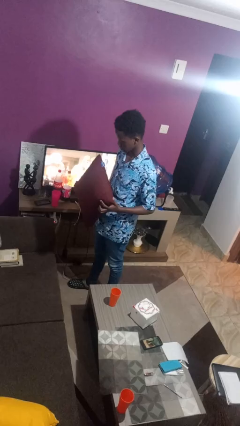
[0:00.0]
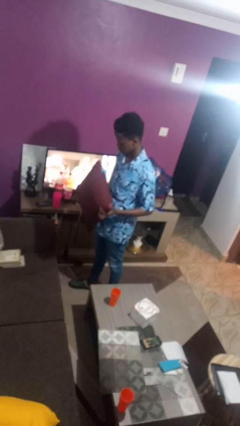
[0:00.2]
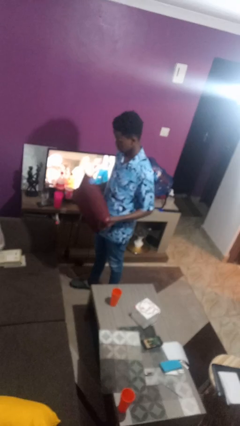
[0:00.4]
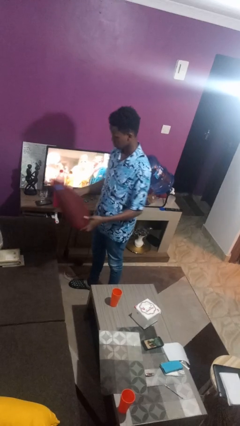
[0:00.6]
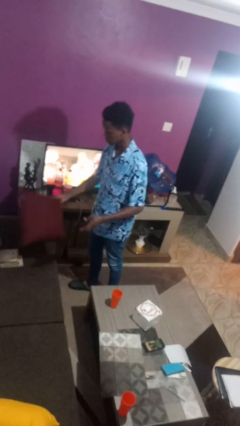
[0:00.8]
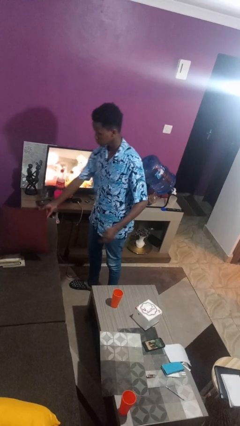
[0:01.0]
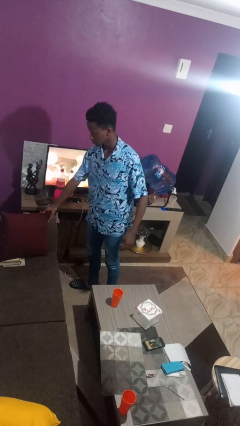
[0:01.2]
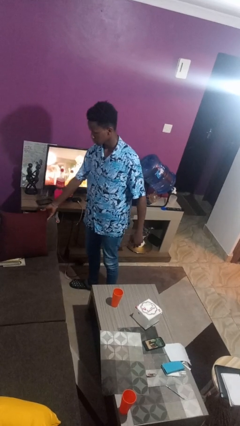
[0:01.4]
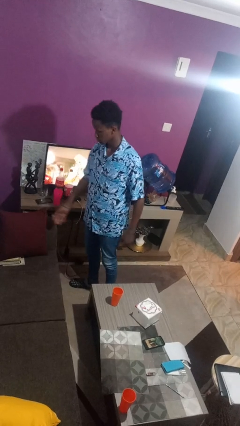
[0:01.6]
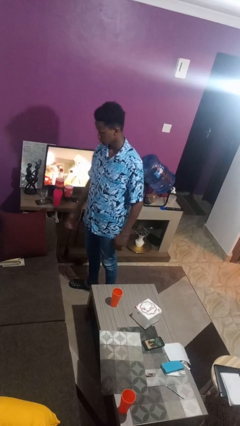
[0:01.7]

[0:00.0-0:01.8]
person puts down object on couch

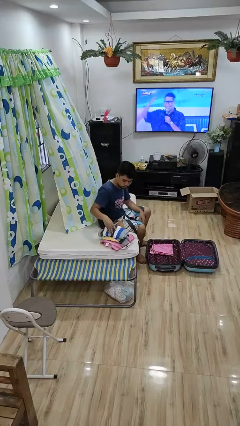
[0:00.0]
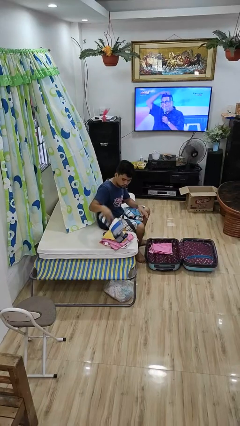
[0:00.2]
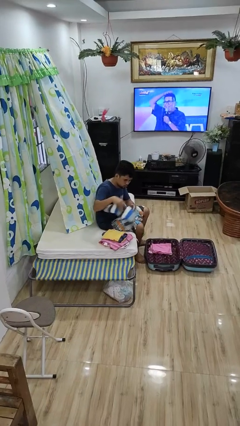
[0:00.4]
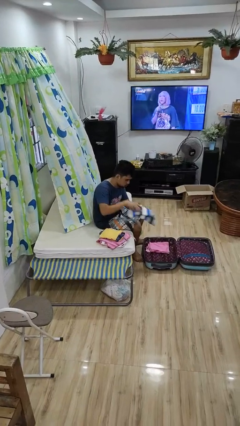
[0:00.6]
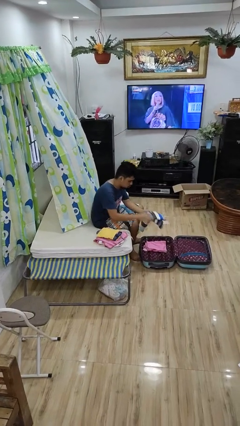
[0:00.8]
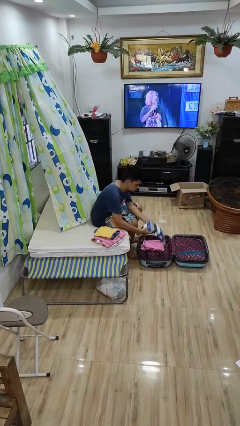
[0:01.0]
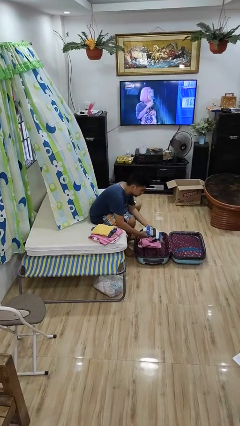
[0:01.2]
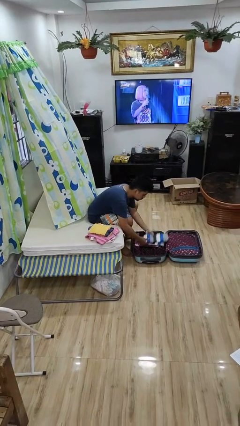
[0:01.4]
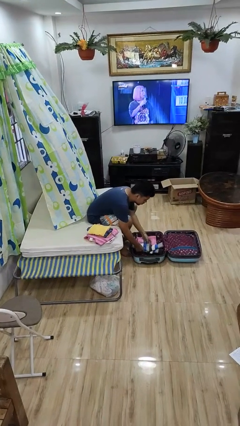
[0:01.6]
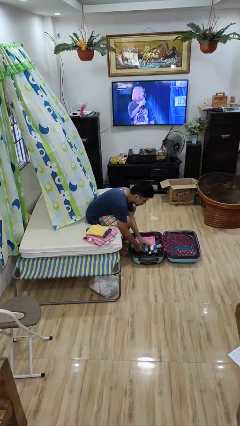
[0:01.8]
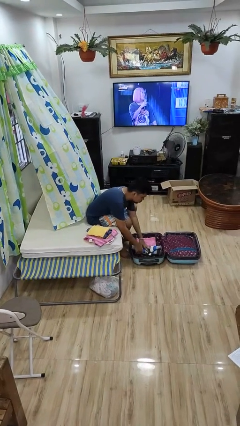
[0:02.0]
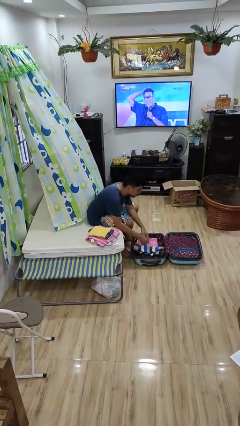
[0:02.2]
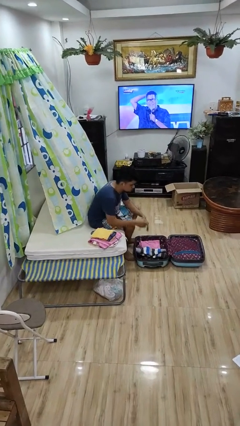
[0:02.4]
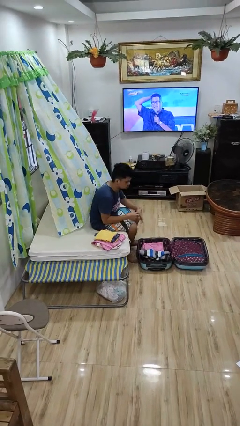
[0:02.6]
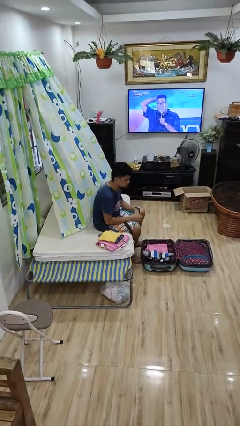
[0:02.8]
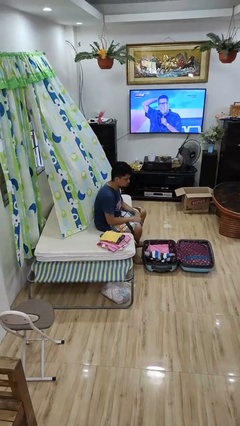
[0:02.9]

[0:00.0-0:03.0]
person loads clothes into suitcase

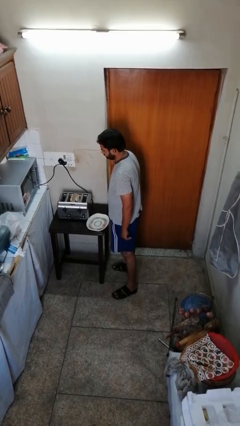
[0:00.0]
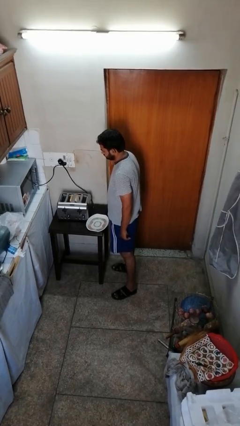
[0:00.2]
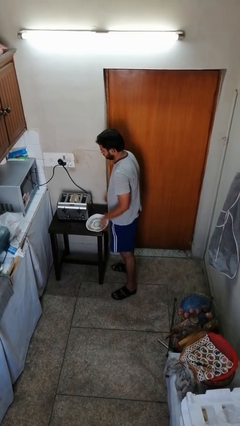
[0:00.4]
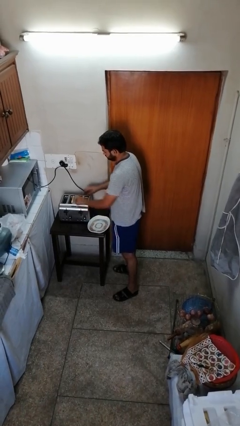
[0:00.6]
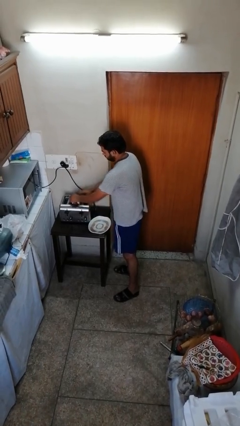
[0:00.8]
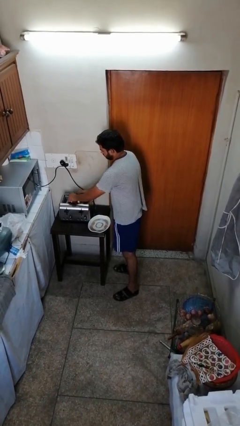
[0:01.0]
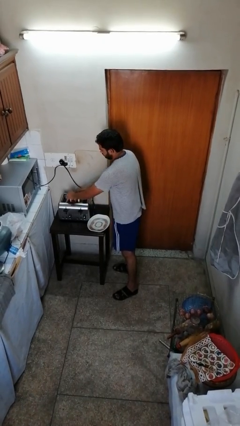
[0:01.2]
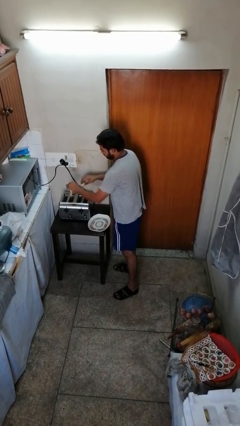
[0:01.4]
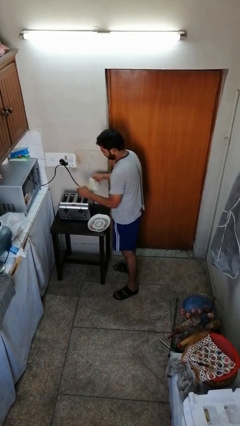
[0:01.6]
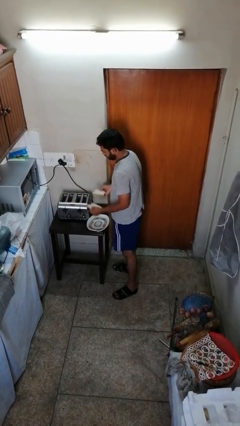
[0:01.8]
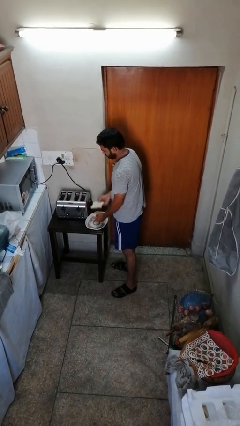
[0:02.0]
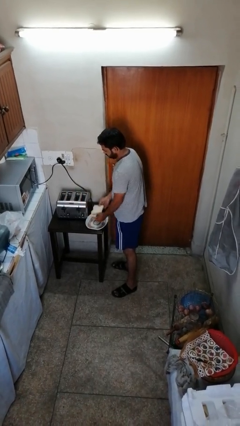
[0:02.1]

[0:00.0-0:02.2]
person takes object from toaster

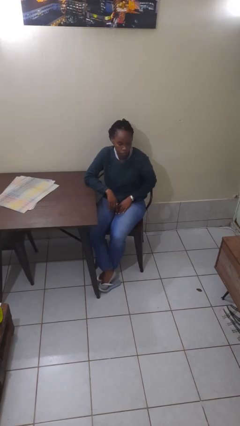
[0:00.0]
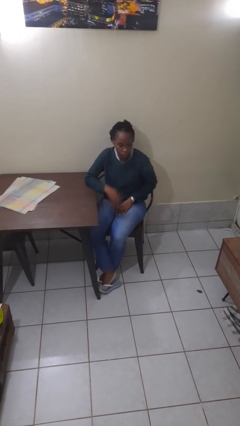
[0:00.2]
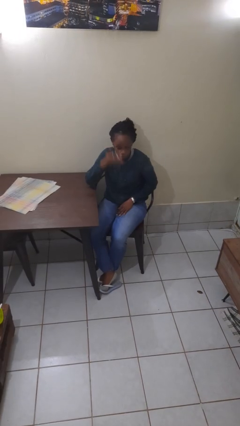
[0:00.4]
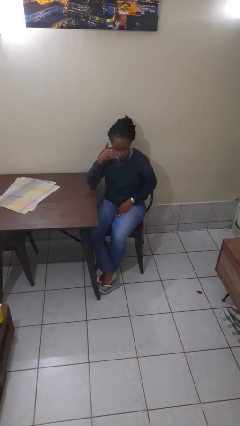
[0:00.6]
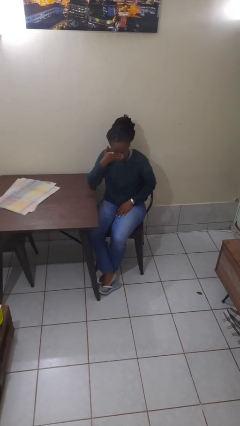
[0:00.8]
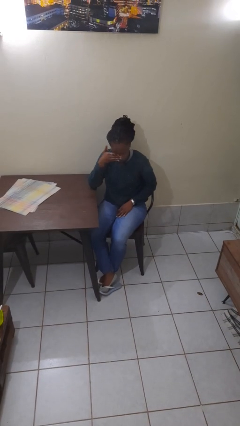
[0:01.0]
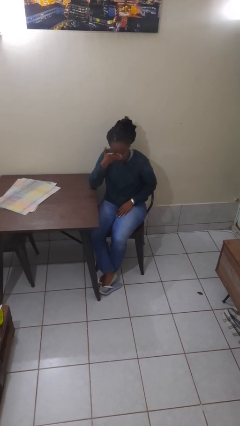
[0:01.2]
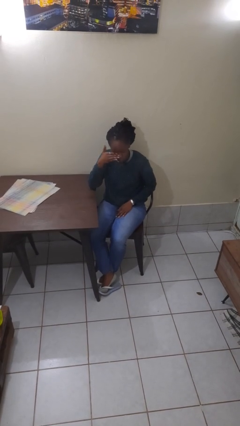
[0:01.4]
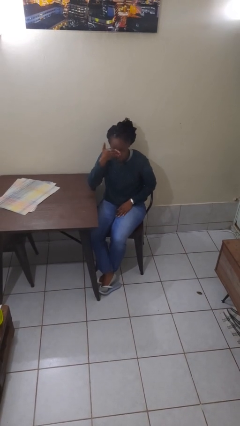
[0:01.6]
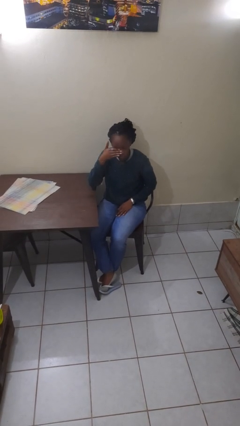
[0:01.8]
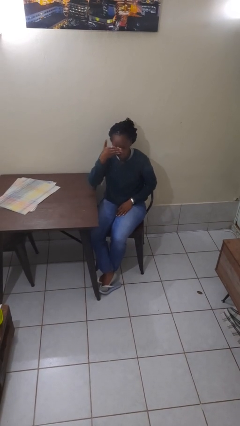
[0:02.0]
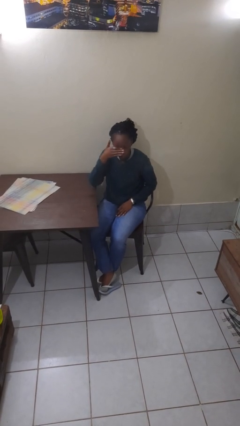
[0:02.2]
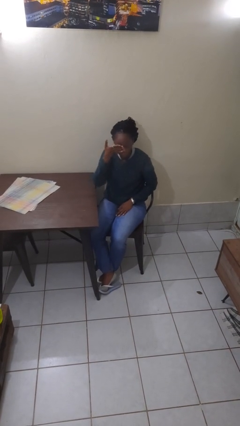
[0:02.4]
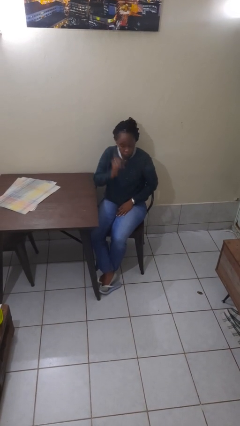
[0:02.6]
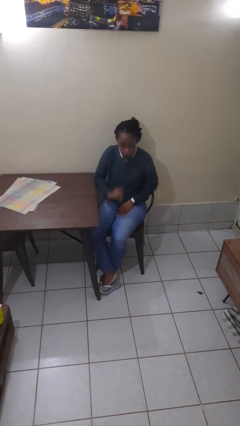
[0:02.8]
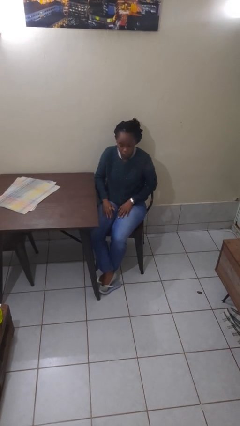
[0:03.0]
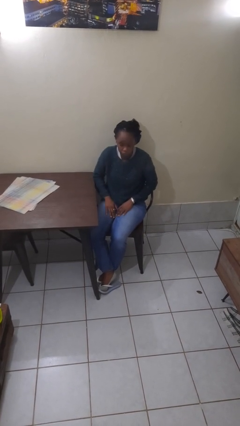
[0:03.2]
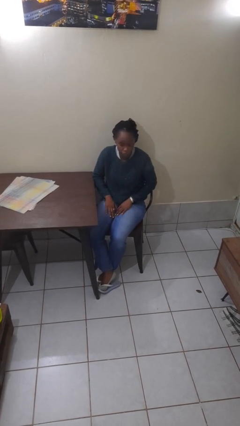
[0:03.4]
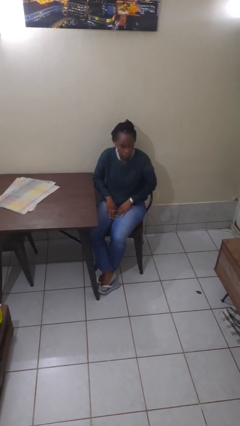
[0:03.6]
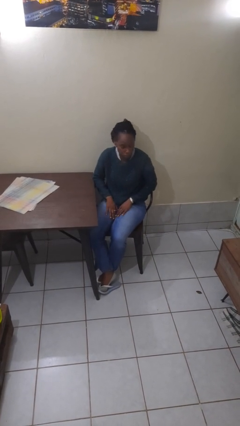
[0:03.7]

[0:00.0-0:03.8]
person rubs eyes

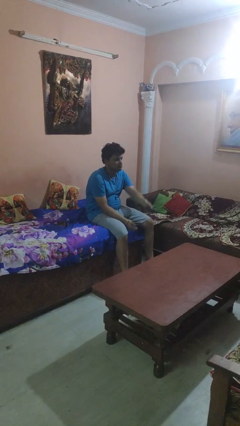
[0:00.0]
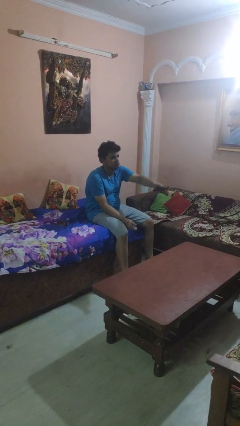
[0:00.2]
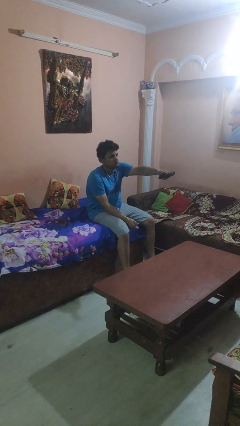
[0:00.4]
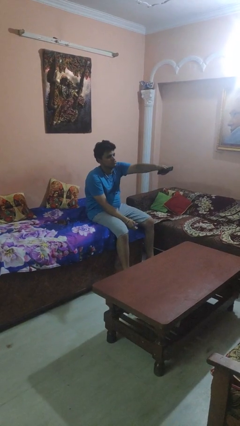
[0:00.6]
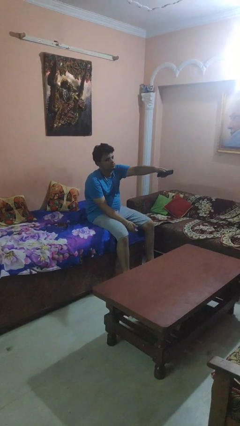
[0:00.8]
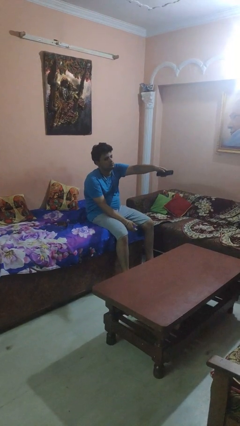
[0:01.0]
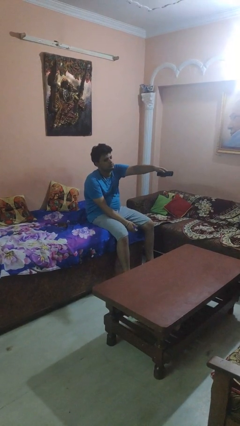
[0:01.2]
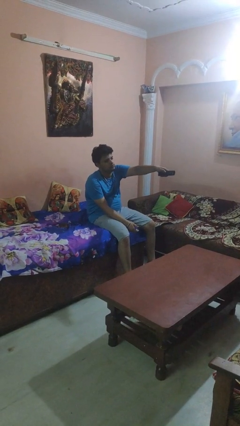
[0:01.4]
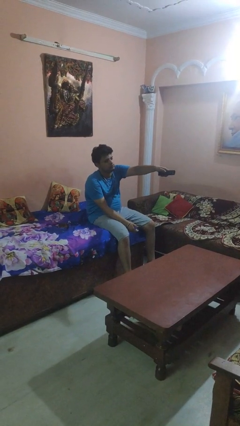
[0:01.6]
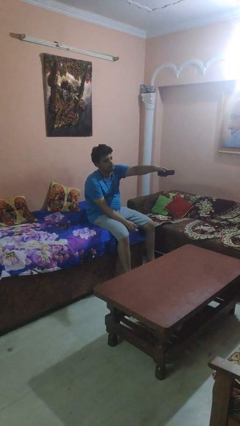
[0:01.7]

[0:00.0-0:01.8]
person uses television remote

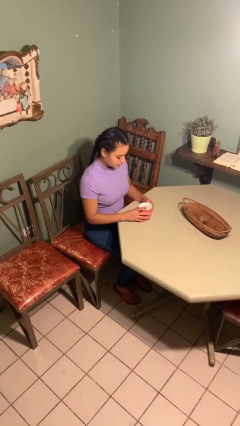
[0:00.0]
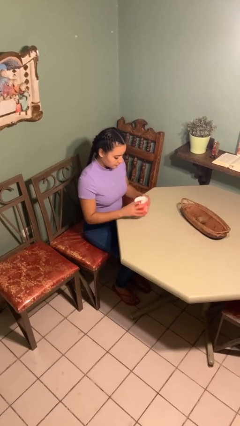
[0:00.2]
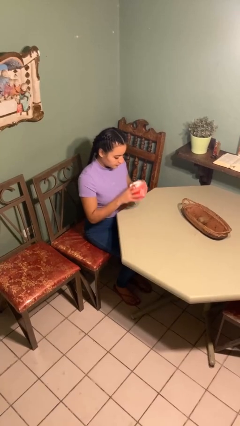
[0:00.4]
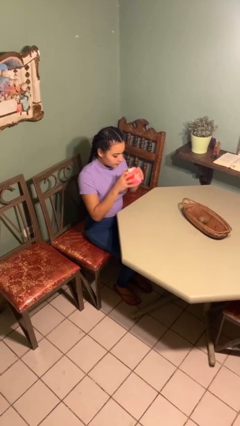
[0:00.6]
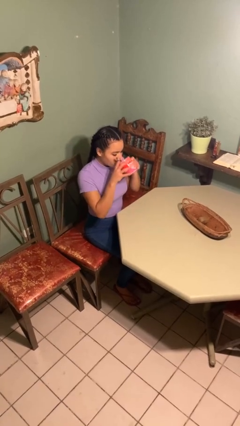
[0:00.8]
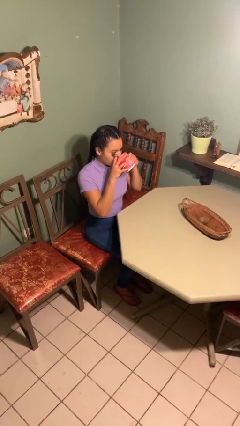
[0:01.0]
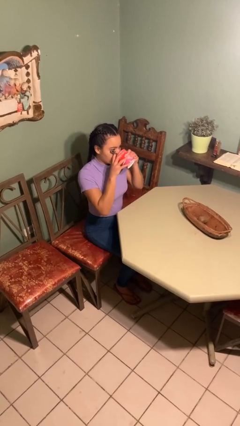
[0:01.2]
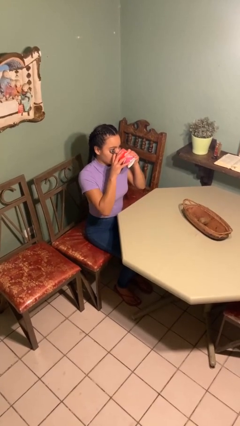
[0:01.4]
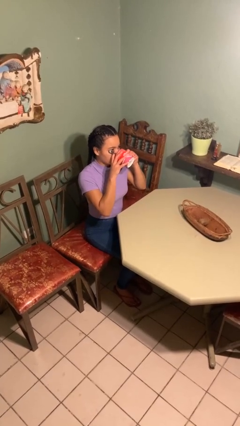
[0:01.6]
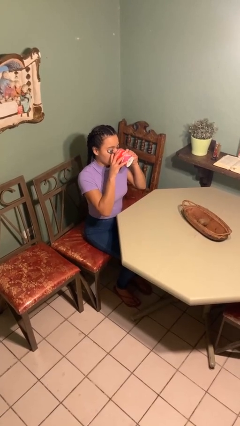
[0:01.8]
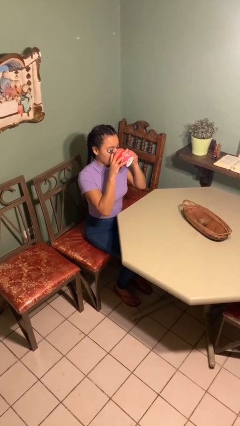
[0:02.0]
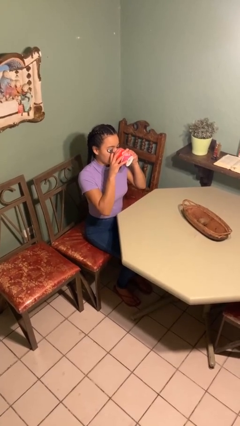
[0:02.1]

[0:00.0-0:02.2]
person drinks from mug

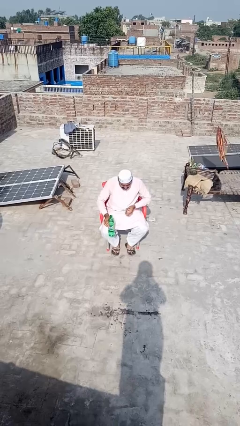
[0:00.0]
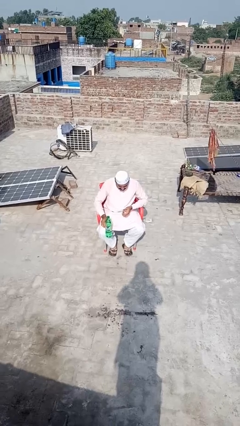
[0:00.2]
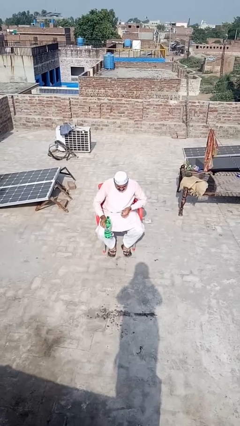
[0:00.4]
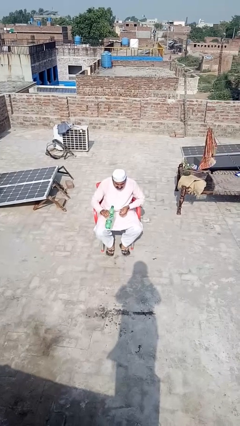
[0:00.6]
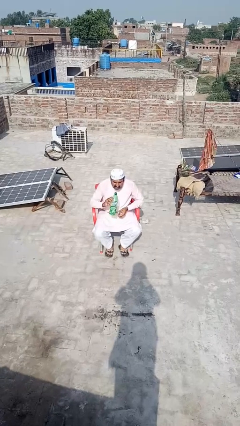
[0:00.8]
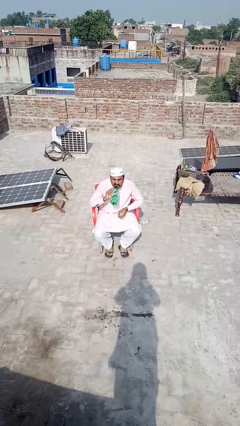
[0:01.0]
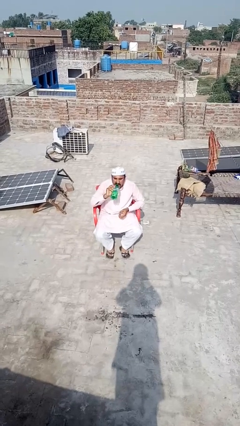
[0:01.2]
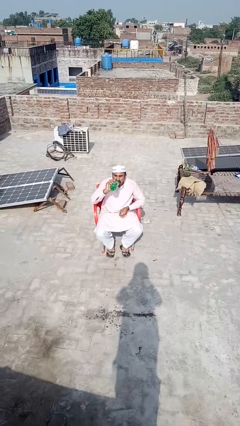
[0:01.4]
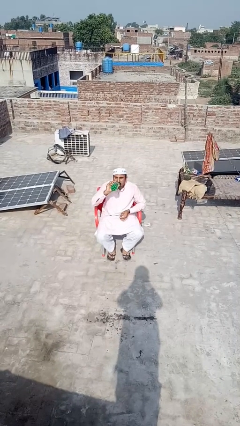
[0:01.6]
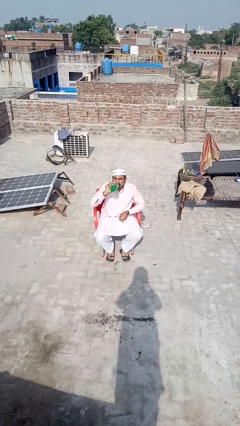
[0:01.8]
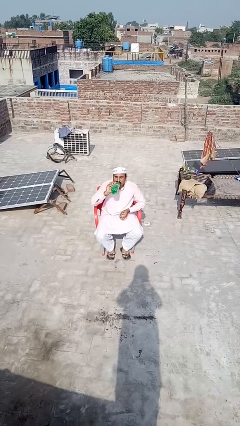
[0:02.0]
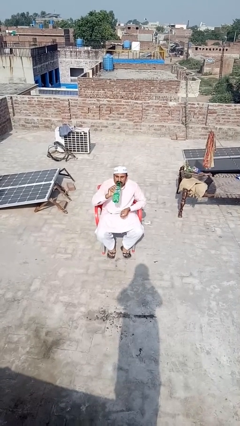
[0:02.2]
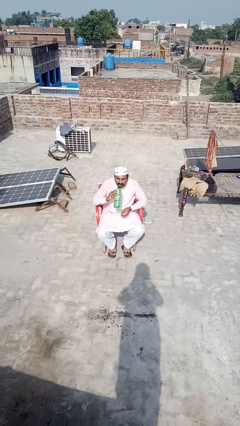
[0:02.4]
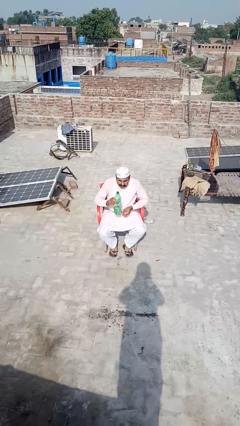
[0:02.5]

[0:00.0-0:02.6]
person drinks from bottle
